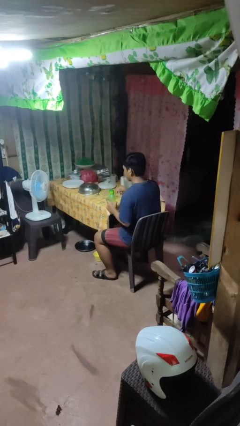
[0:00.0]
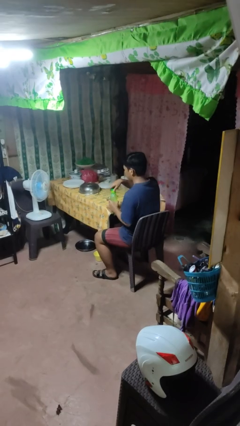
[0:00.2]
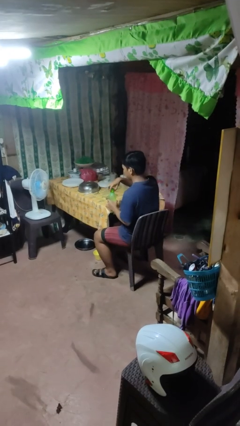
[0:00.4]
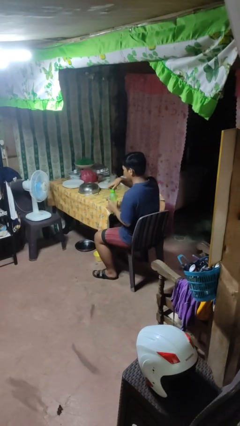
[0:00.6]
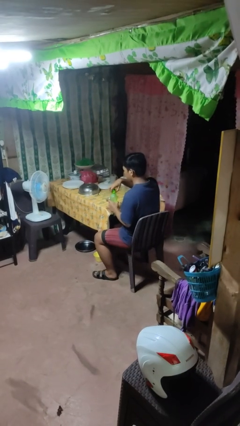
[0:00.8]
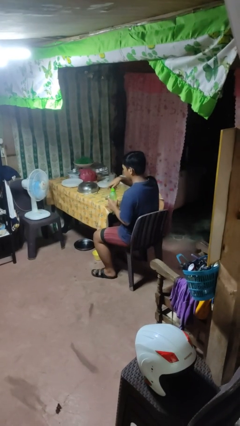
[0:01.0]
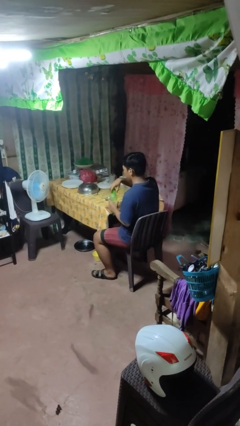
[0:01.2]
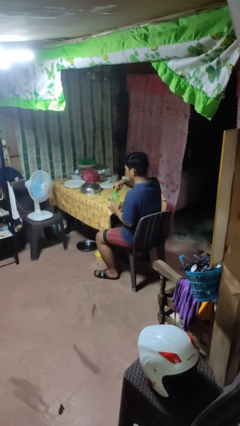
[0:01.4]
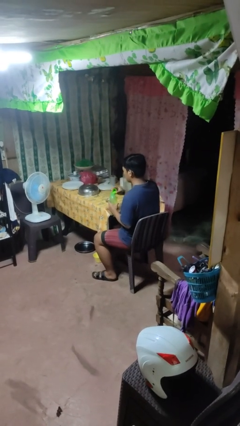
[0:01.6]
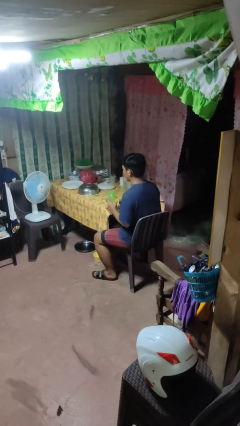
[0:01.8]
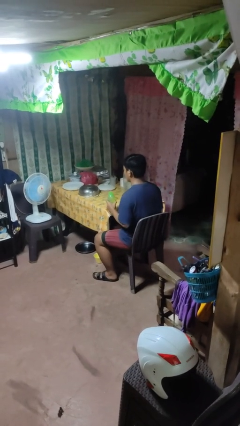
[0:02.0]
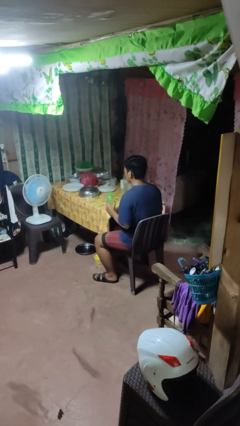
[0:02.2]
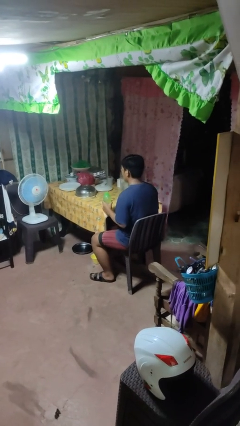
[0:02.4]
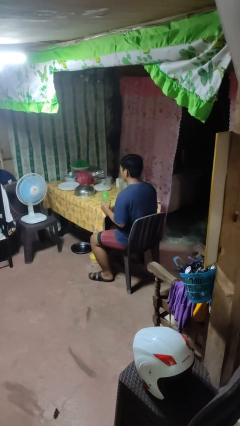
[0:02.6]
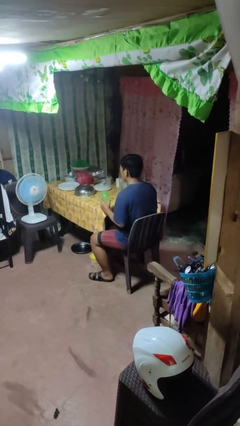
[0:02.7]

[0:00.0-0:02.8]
person unscrews lid from bottle

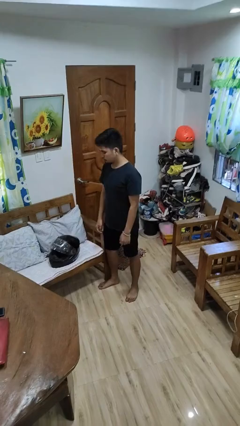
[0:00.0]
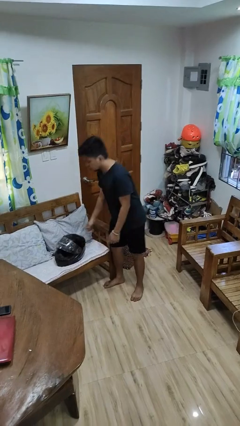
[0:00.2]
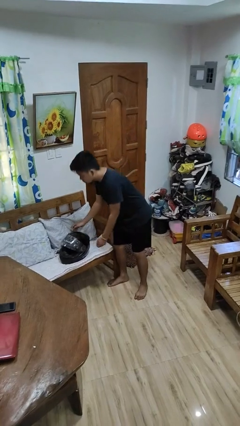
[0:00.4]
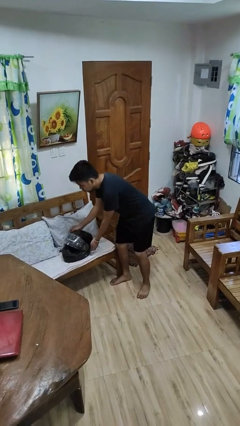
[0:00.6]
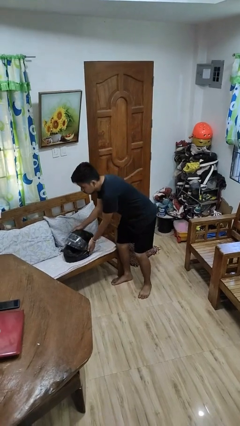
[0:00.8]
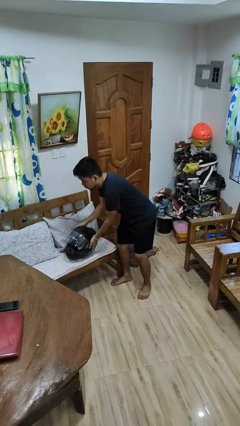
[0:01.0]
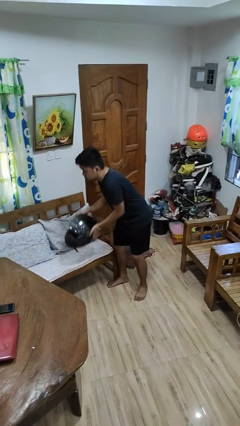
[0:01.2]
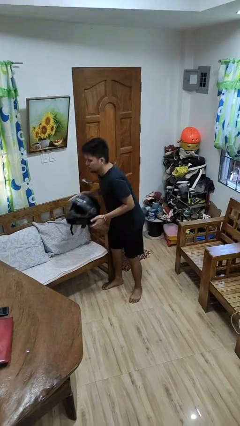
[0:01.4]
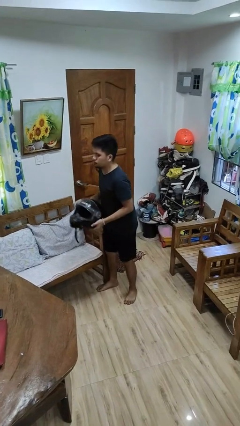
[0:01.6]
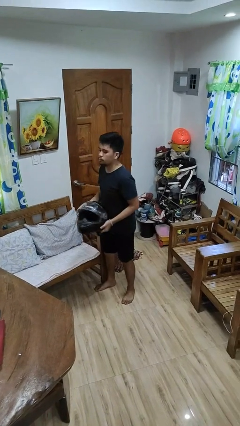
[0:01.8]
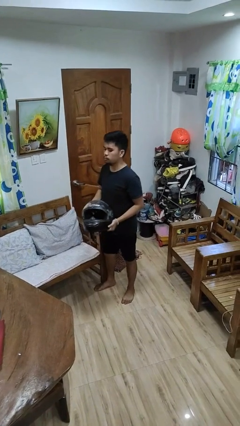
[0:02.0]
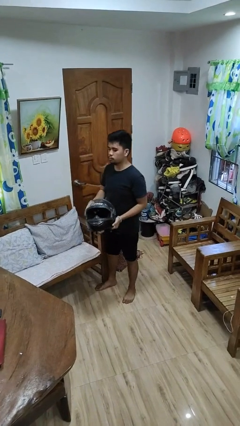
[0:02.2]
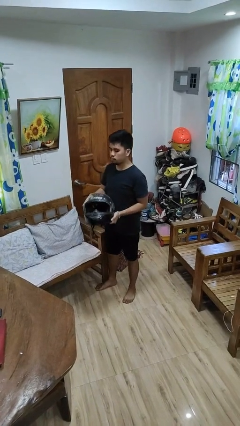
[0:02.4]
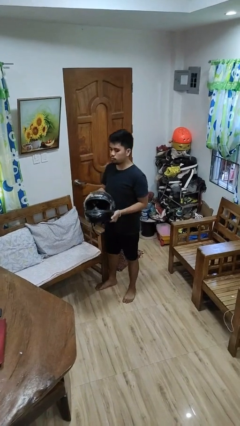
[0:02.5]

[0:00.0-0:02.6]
person picks up object from couch

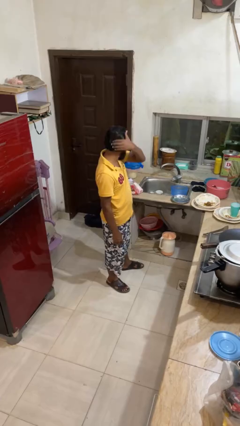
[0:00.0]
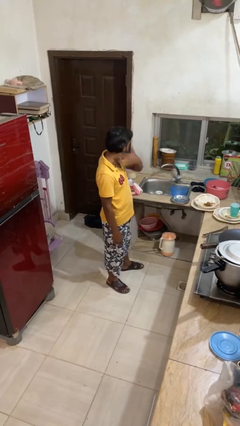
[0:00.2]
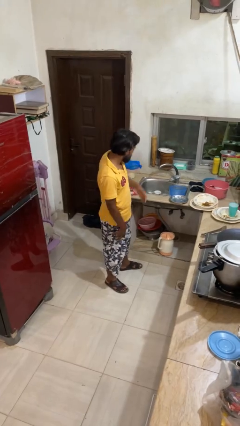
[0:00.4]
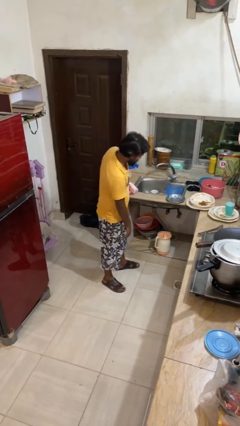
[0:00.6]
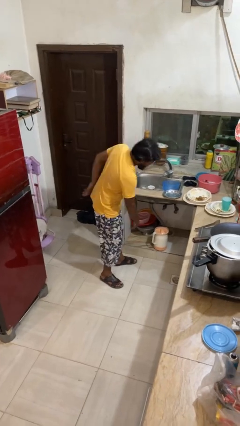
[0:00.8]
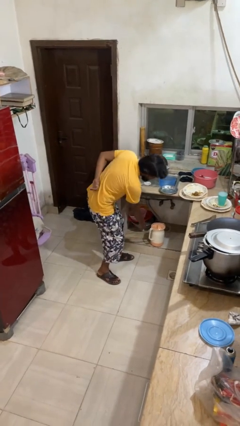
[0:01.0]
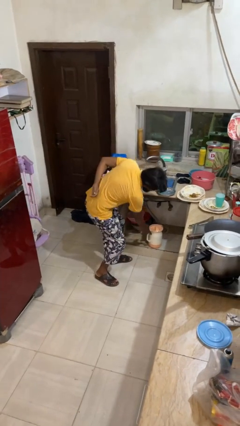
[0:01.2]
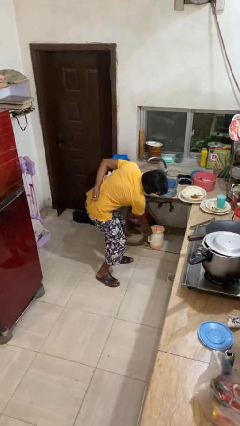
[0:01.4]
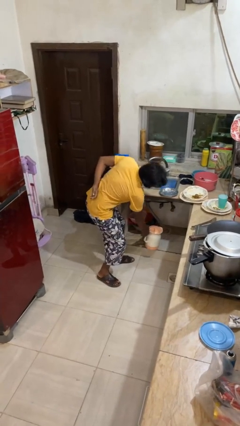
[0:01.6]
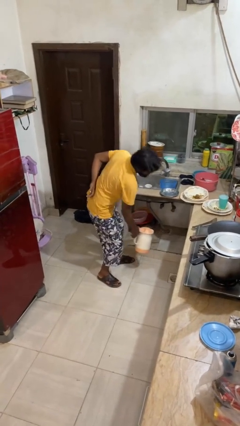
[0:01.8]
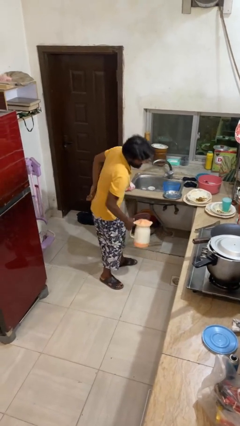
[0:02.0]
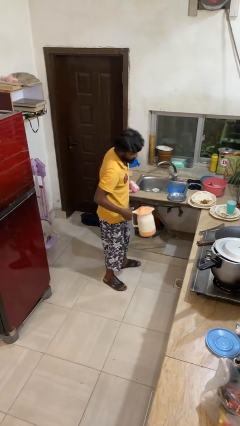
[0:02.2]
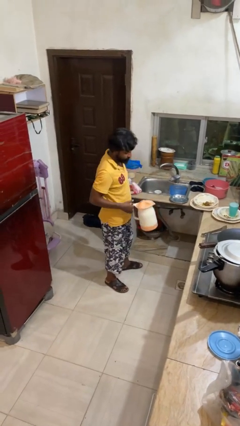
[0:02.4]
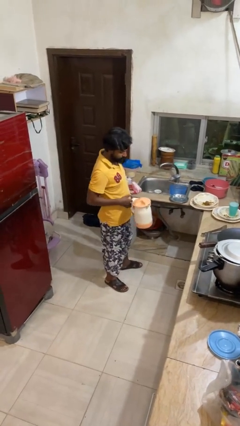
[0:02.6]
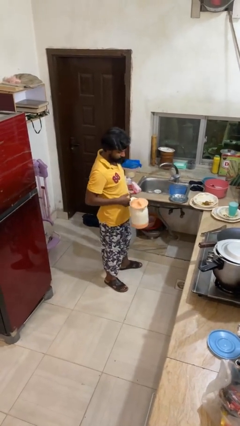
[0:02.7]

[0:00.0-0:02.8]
person picks up object from cabinet

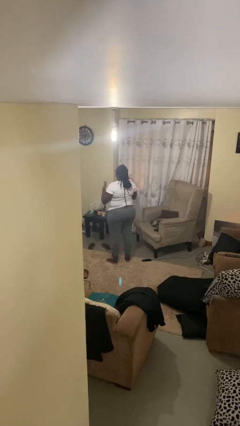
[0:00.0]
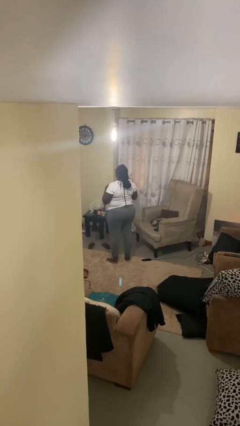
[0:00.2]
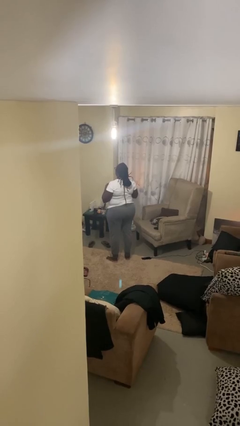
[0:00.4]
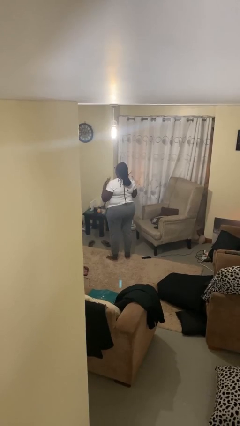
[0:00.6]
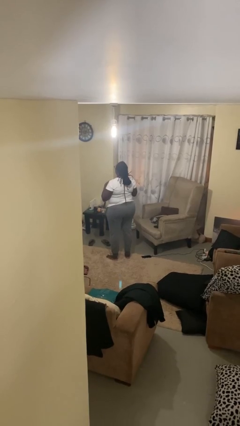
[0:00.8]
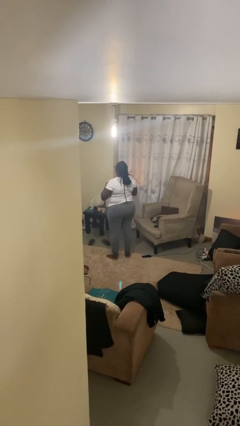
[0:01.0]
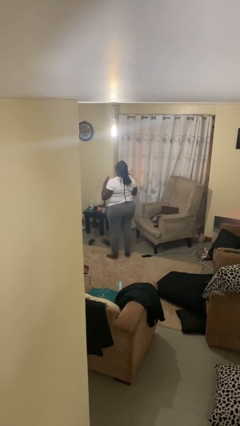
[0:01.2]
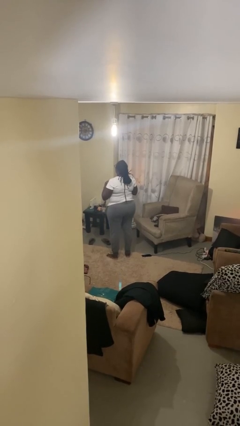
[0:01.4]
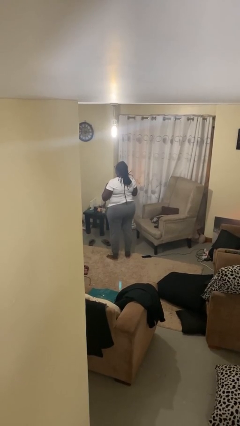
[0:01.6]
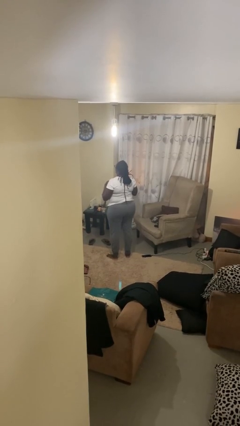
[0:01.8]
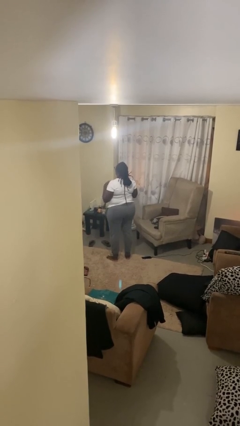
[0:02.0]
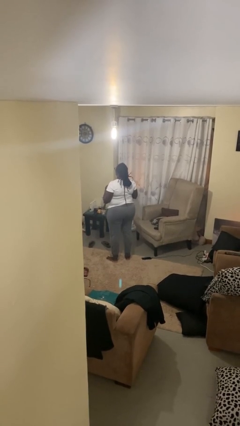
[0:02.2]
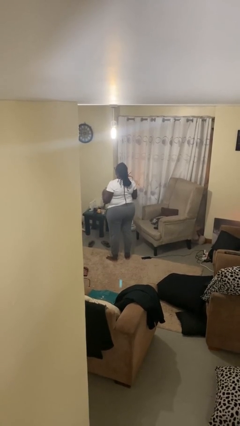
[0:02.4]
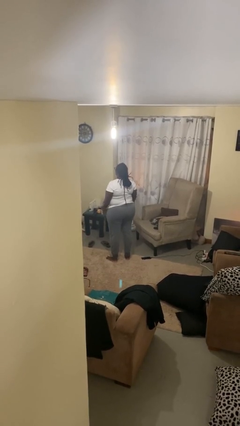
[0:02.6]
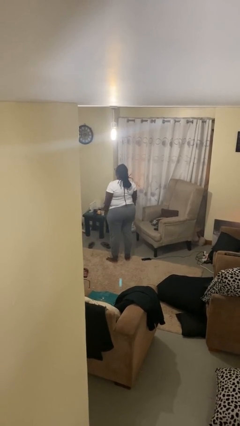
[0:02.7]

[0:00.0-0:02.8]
person drums on chest

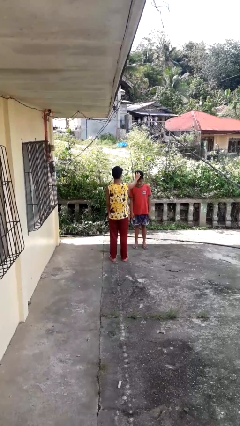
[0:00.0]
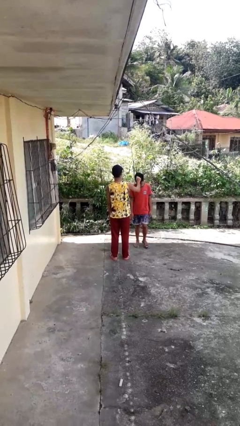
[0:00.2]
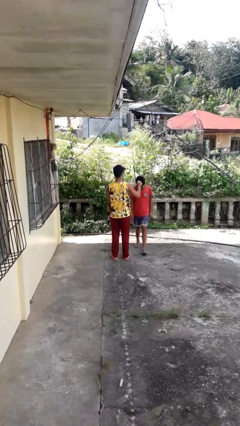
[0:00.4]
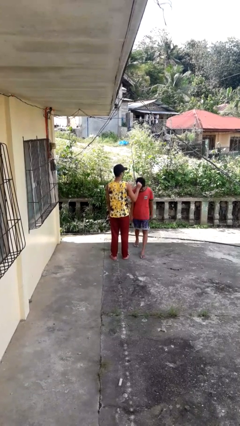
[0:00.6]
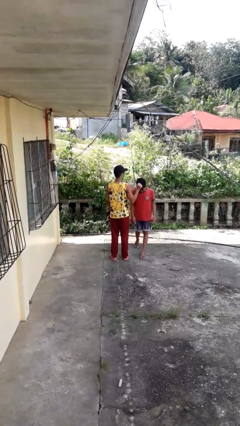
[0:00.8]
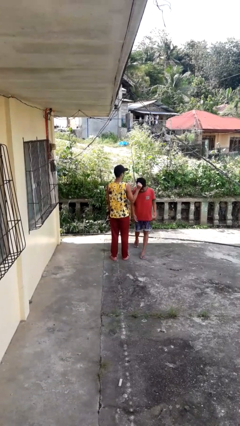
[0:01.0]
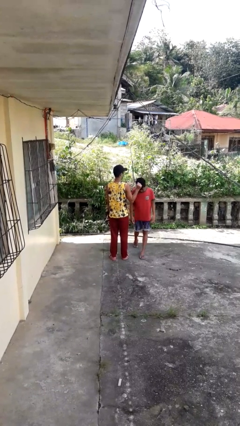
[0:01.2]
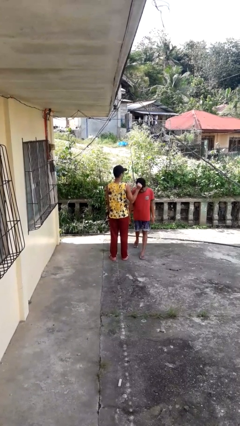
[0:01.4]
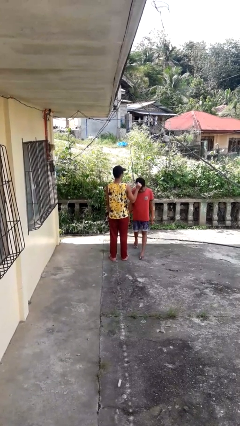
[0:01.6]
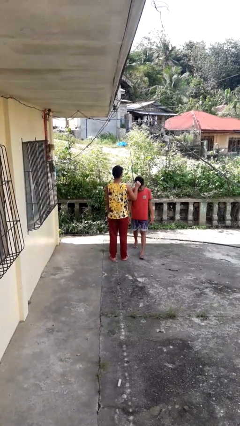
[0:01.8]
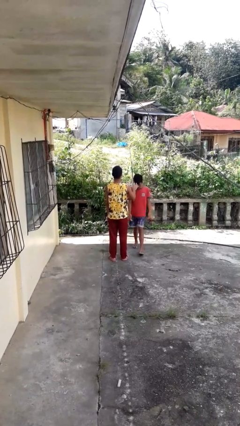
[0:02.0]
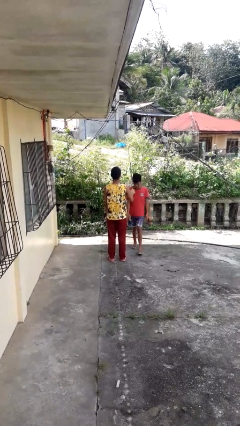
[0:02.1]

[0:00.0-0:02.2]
person grabs person by hair

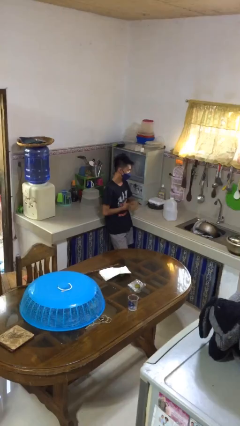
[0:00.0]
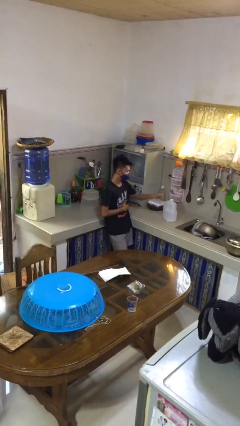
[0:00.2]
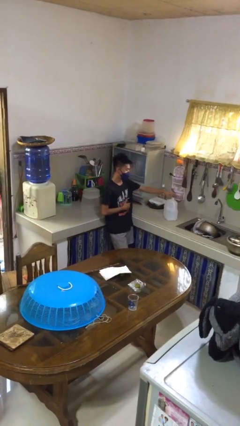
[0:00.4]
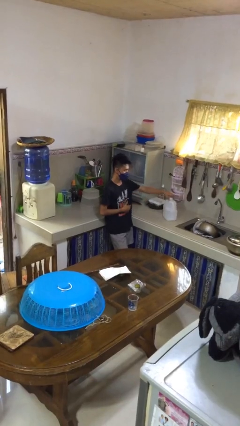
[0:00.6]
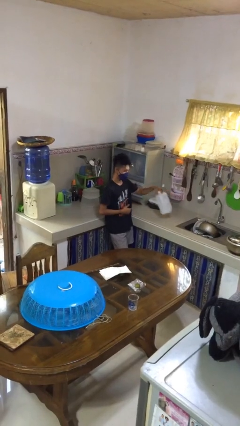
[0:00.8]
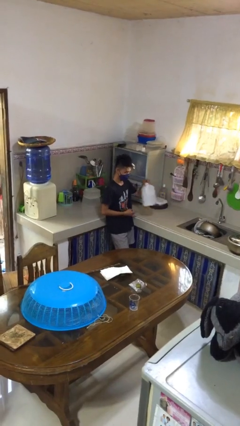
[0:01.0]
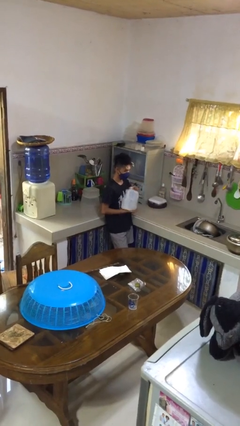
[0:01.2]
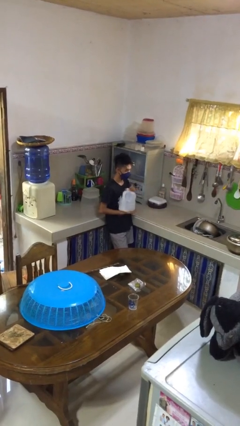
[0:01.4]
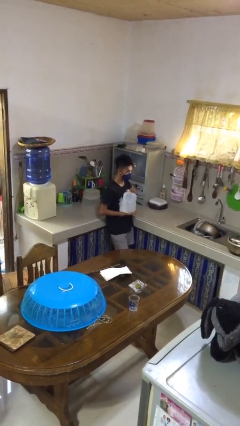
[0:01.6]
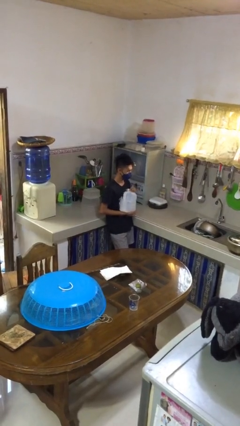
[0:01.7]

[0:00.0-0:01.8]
person puts down object on countertop

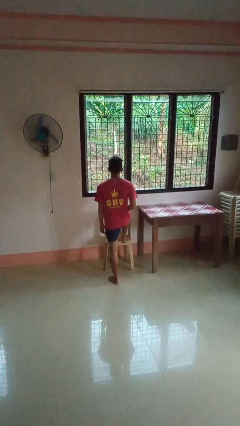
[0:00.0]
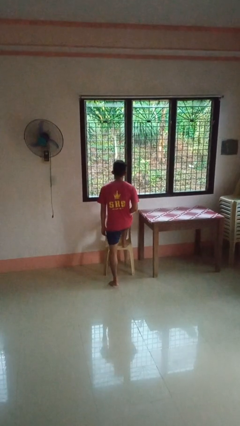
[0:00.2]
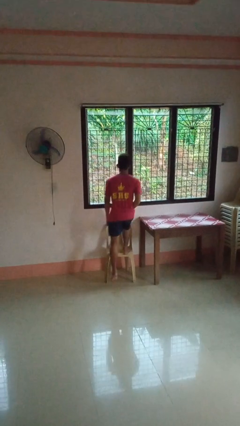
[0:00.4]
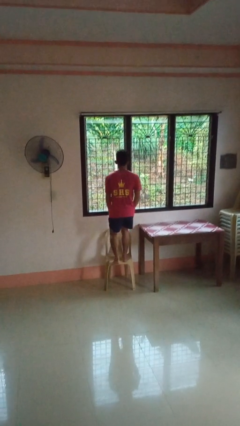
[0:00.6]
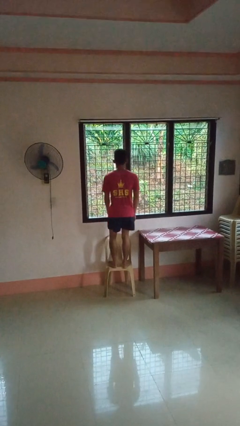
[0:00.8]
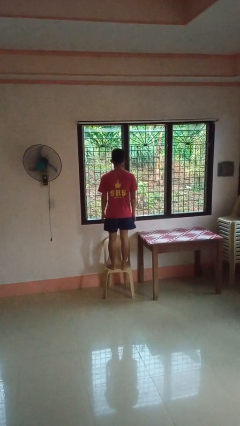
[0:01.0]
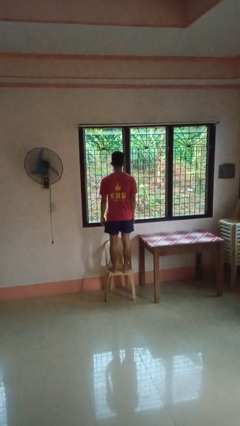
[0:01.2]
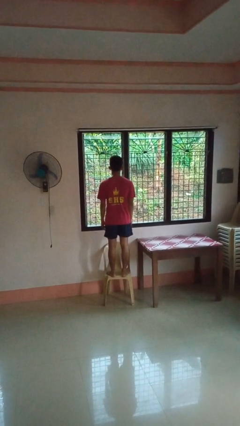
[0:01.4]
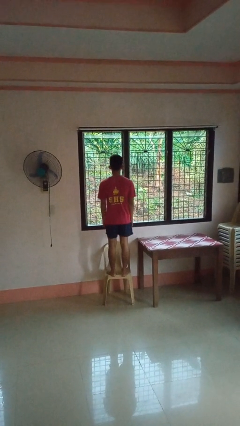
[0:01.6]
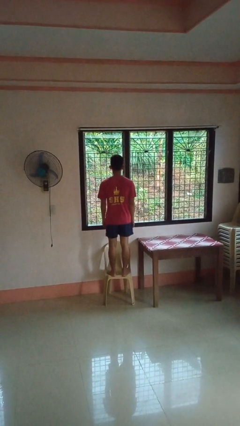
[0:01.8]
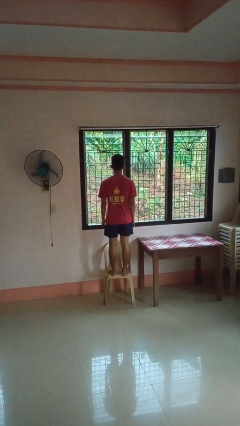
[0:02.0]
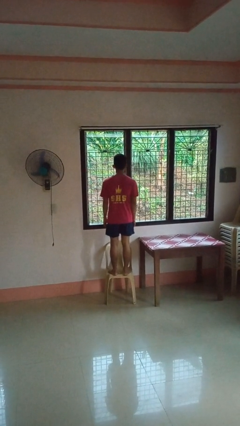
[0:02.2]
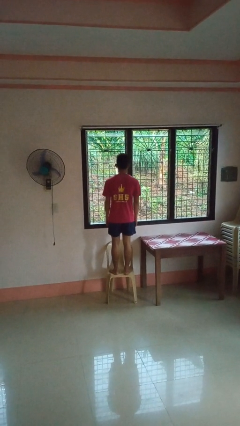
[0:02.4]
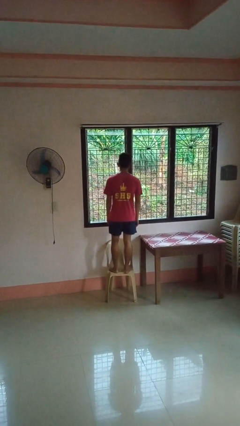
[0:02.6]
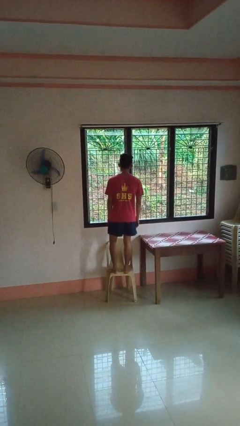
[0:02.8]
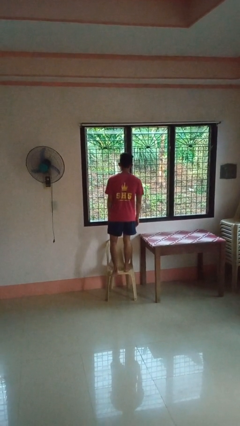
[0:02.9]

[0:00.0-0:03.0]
person climbs on chair
